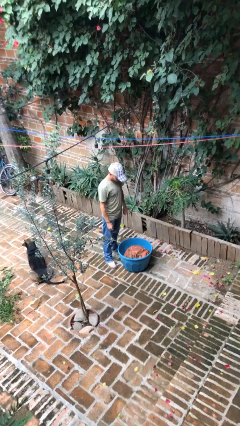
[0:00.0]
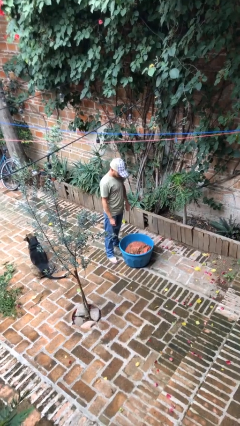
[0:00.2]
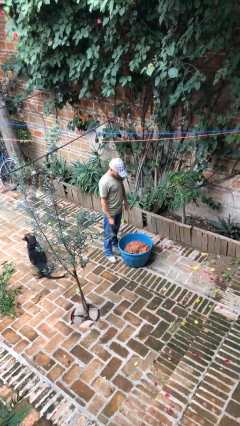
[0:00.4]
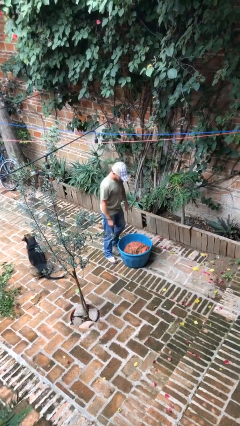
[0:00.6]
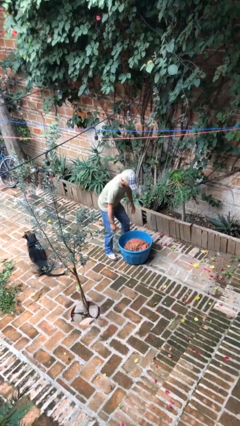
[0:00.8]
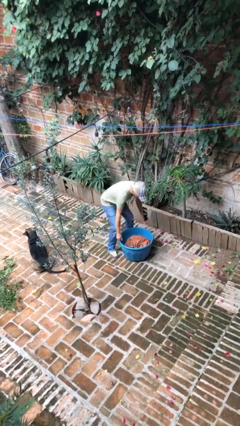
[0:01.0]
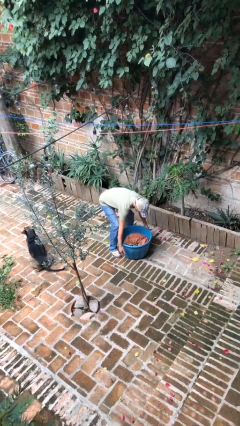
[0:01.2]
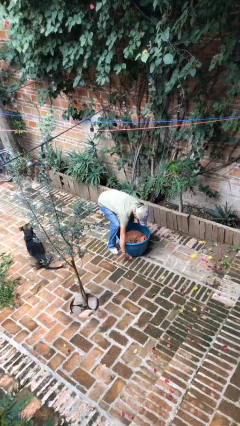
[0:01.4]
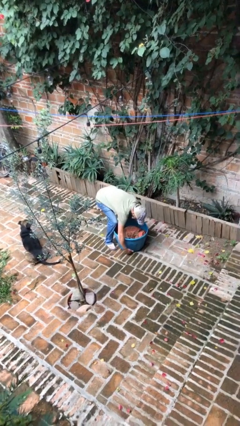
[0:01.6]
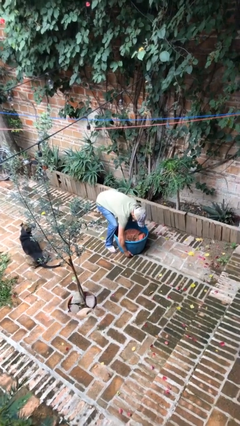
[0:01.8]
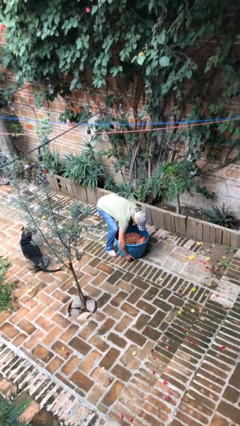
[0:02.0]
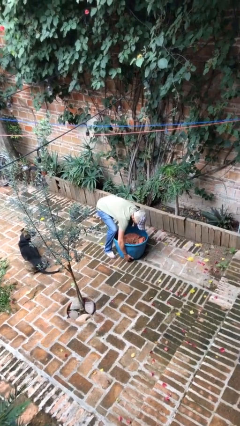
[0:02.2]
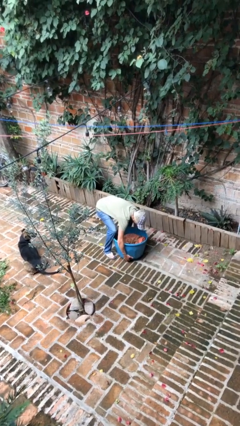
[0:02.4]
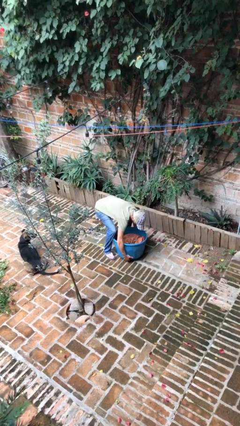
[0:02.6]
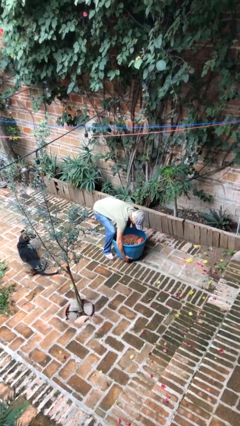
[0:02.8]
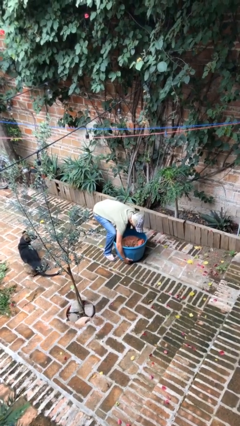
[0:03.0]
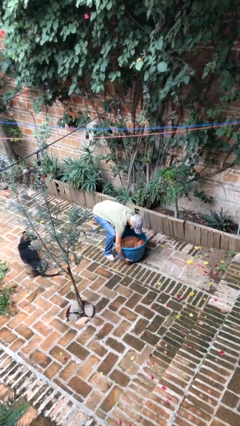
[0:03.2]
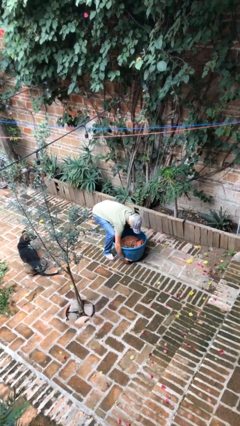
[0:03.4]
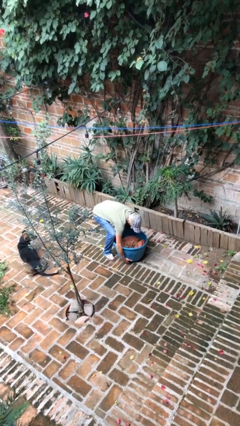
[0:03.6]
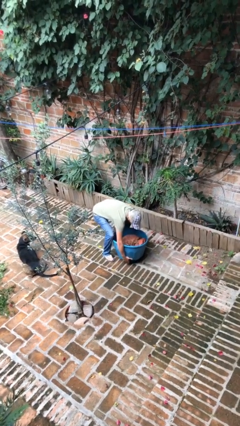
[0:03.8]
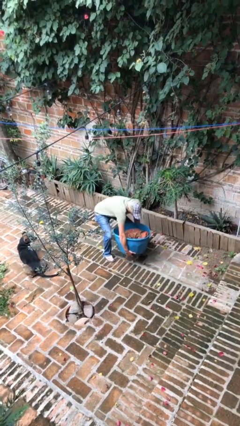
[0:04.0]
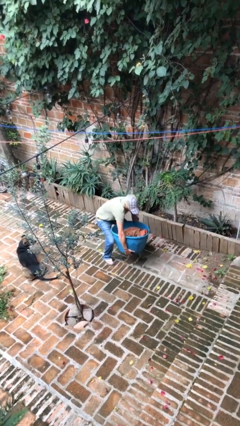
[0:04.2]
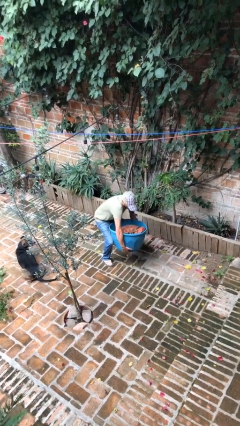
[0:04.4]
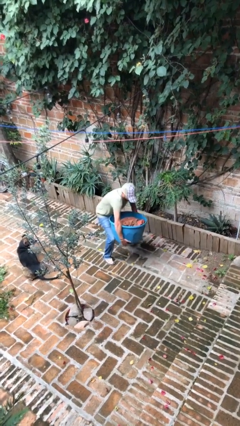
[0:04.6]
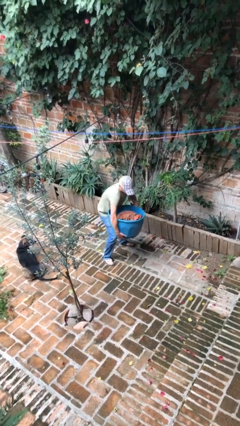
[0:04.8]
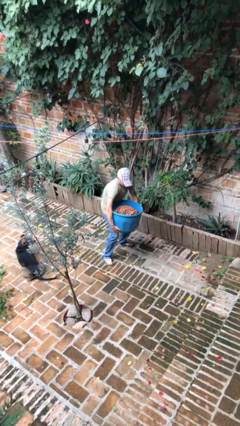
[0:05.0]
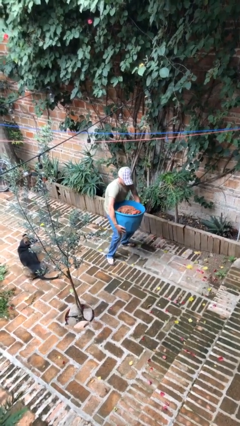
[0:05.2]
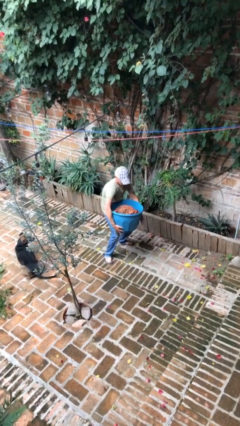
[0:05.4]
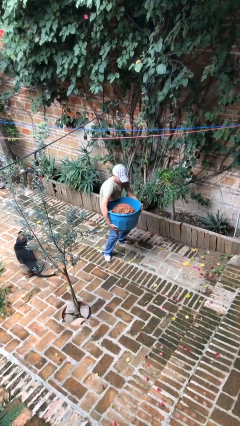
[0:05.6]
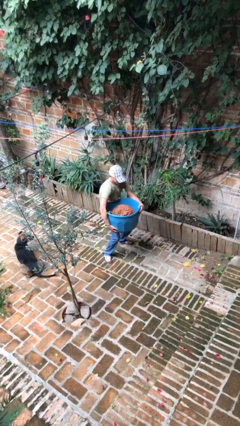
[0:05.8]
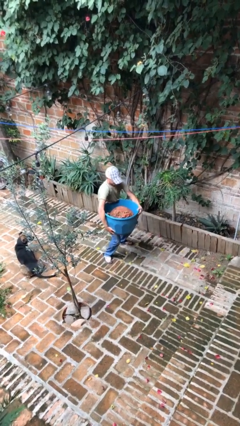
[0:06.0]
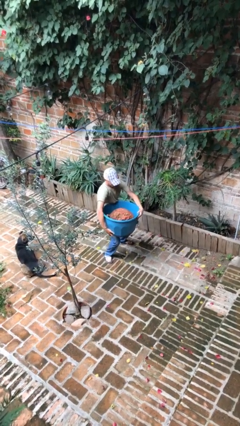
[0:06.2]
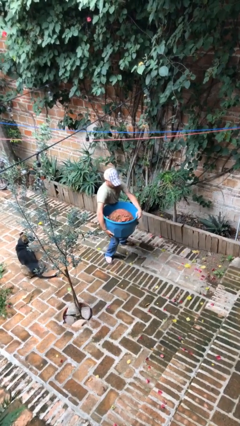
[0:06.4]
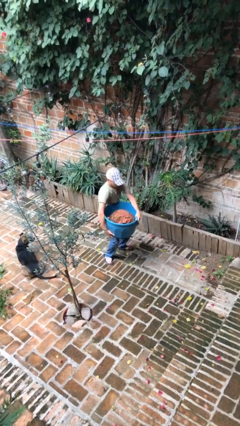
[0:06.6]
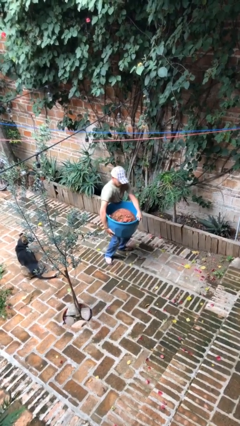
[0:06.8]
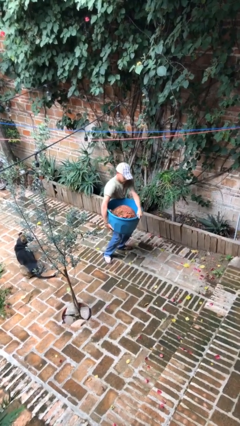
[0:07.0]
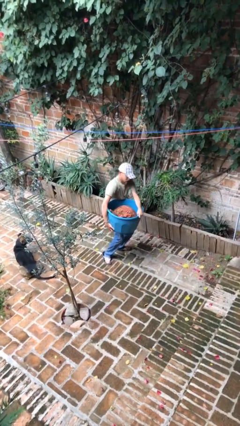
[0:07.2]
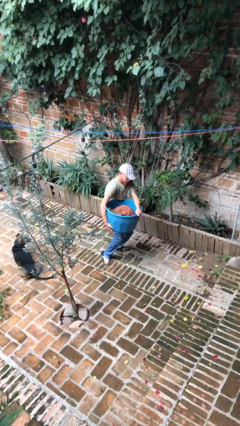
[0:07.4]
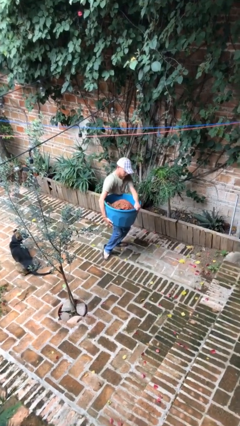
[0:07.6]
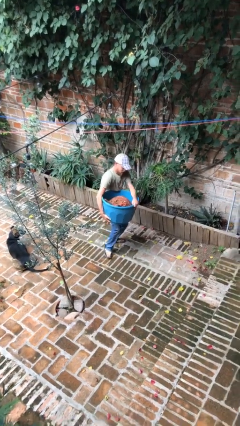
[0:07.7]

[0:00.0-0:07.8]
person picks up object from floor

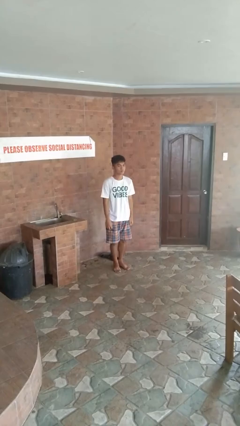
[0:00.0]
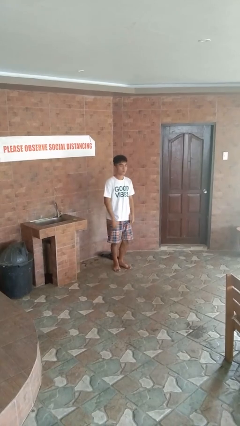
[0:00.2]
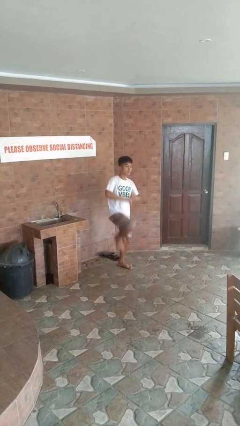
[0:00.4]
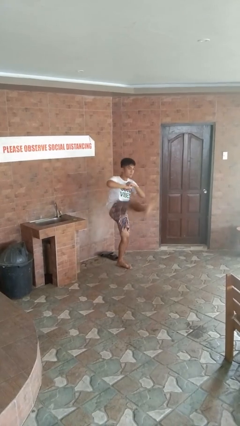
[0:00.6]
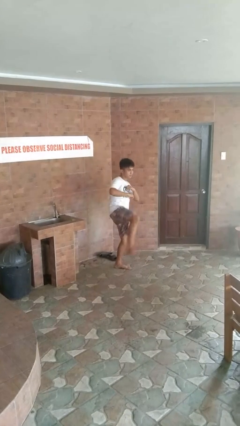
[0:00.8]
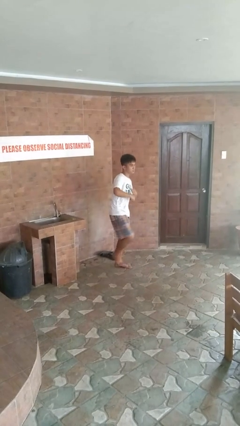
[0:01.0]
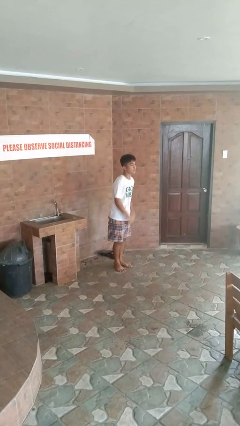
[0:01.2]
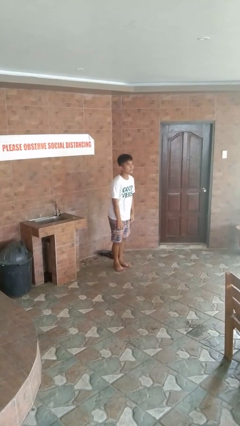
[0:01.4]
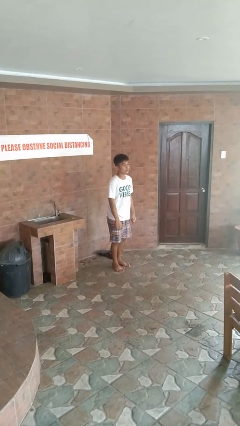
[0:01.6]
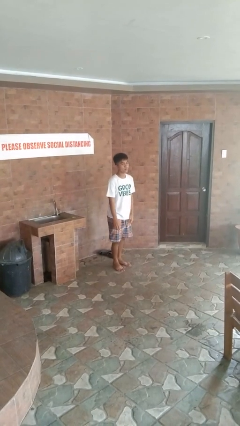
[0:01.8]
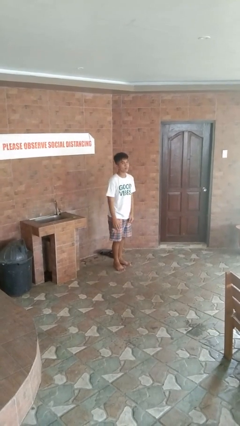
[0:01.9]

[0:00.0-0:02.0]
person karate kicks

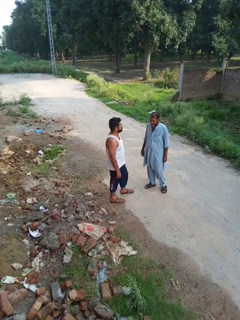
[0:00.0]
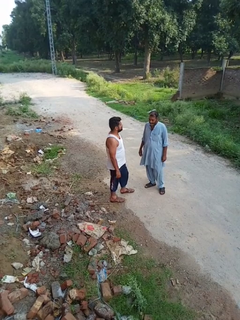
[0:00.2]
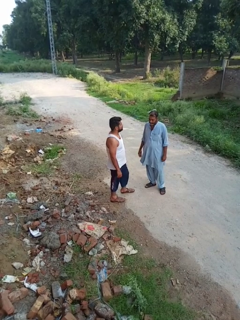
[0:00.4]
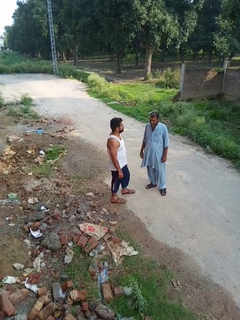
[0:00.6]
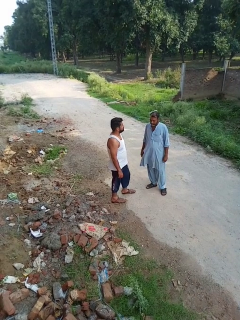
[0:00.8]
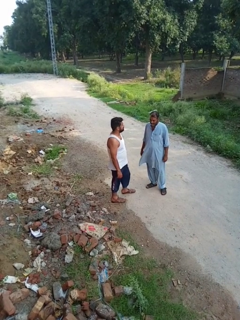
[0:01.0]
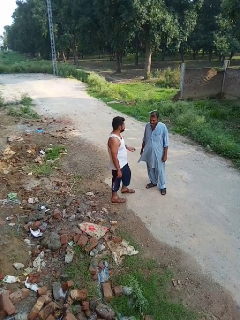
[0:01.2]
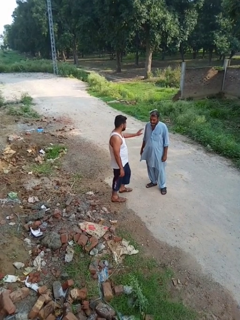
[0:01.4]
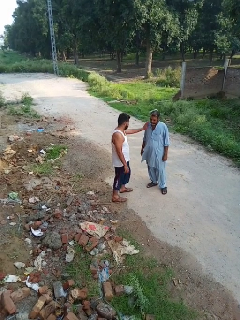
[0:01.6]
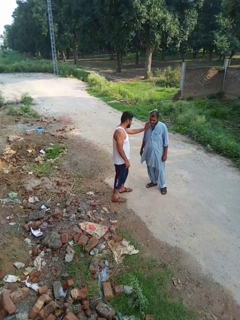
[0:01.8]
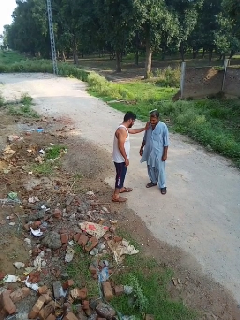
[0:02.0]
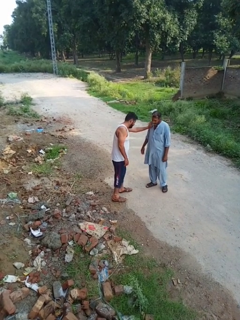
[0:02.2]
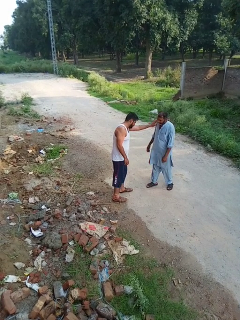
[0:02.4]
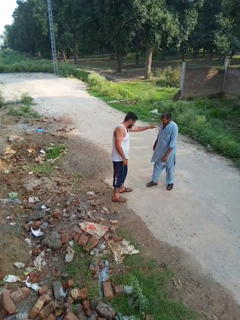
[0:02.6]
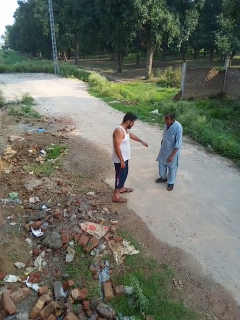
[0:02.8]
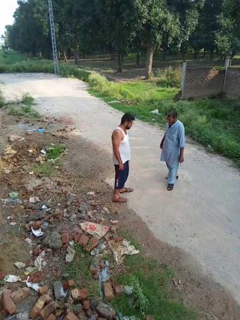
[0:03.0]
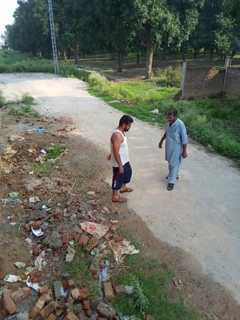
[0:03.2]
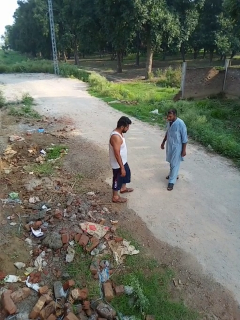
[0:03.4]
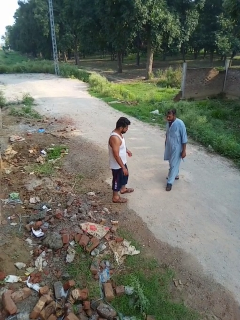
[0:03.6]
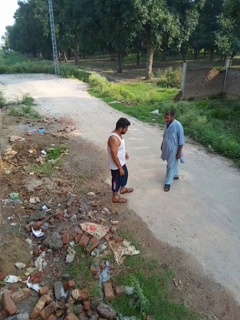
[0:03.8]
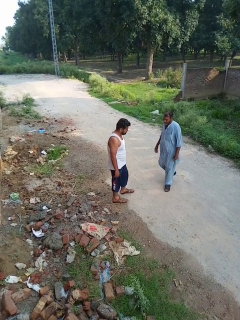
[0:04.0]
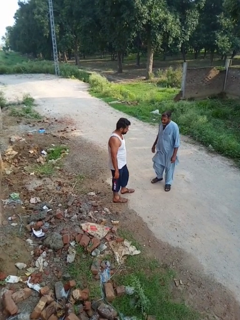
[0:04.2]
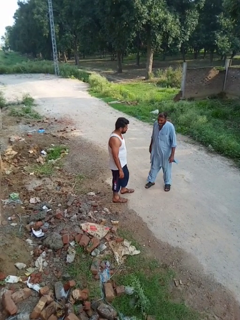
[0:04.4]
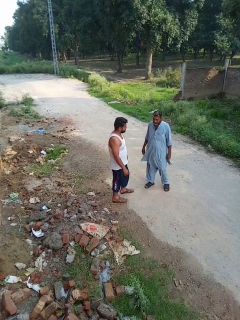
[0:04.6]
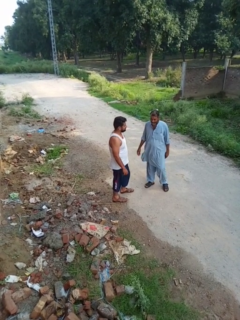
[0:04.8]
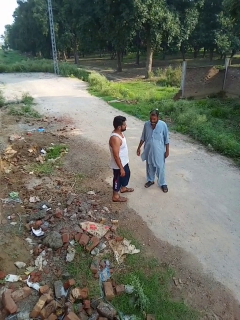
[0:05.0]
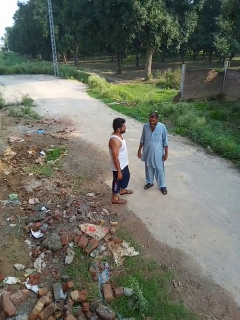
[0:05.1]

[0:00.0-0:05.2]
person shoves person

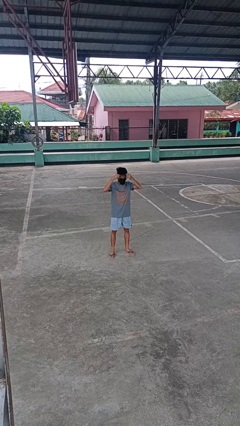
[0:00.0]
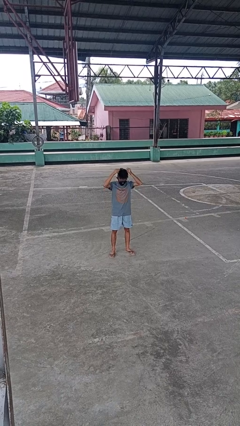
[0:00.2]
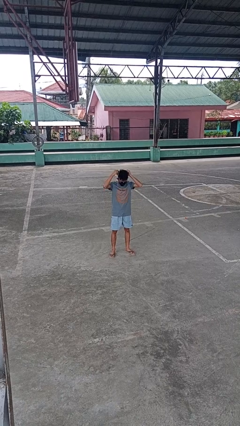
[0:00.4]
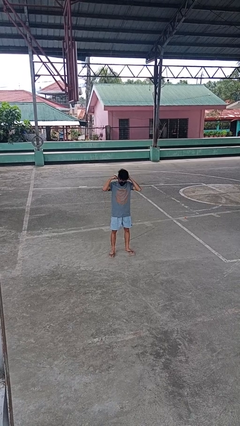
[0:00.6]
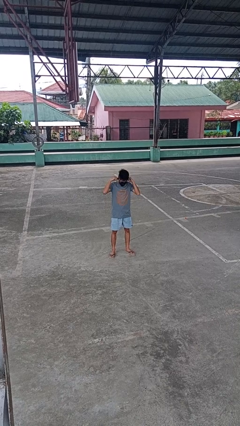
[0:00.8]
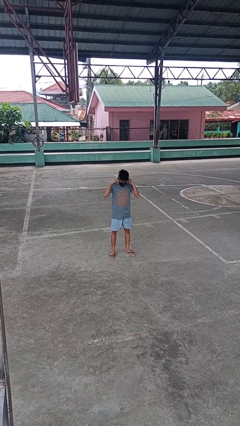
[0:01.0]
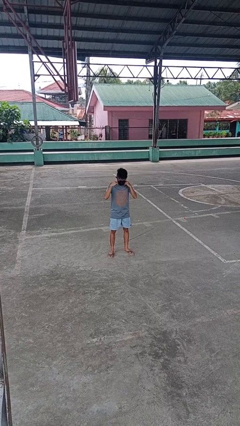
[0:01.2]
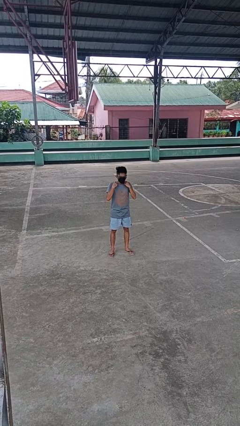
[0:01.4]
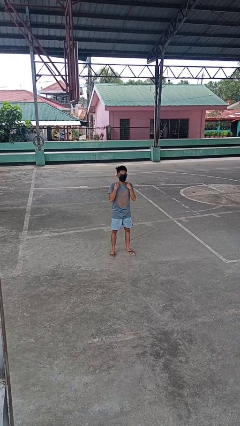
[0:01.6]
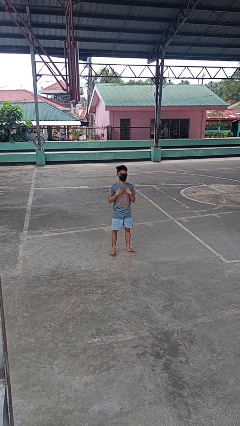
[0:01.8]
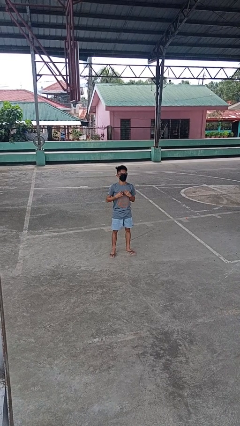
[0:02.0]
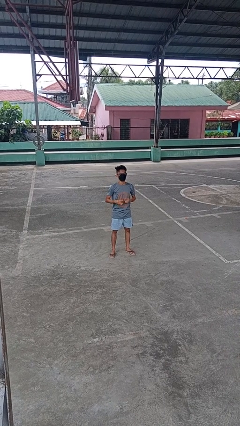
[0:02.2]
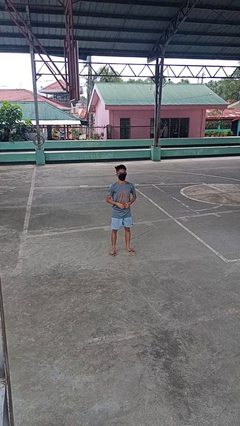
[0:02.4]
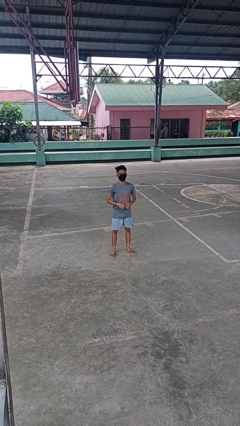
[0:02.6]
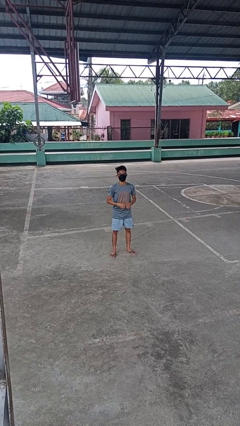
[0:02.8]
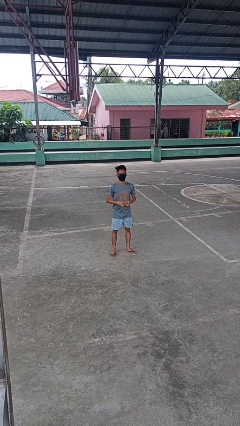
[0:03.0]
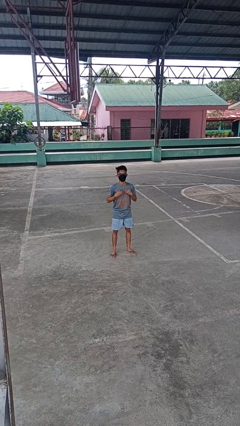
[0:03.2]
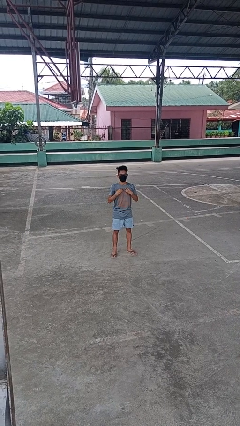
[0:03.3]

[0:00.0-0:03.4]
person puts on necklace

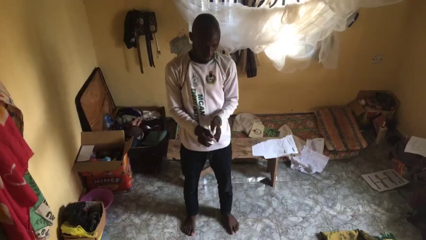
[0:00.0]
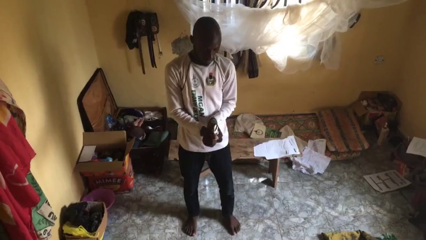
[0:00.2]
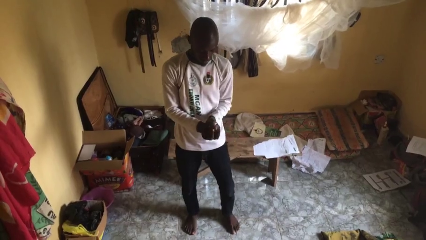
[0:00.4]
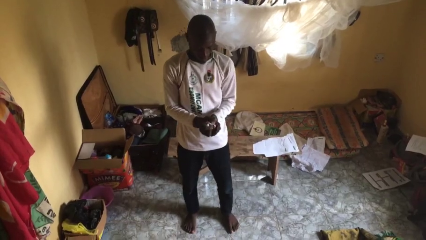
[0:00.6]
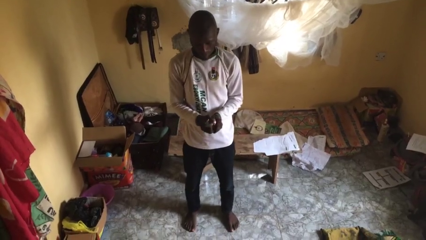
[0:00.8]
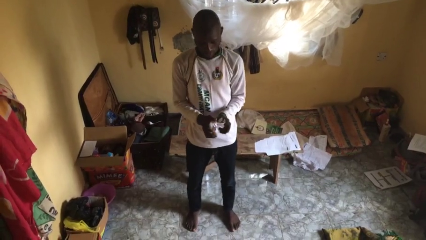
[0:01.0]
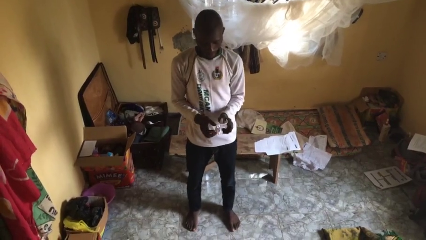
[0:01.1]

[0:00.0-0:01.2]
person crumples paper
